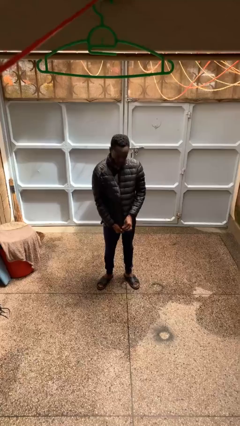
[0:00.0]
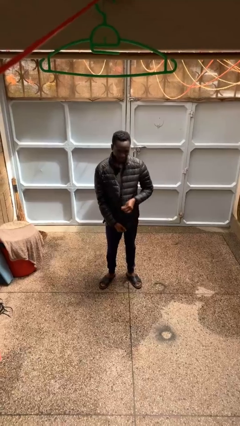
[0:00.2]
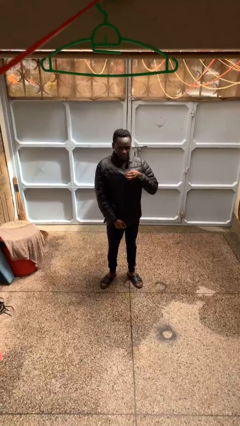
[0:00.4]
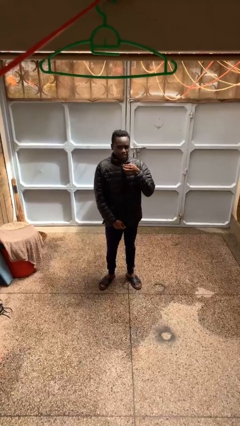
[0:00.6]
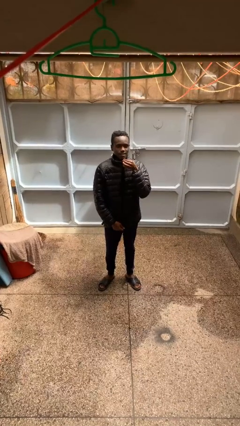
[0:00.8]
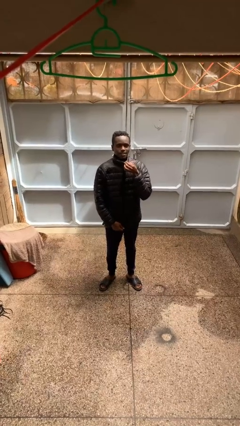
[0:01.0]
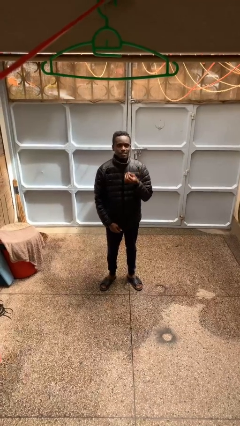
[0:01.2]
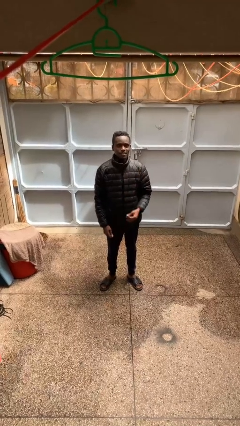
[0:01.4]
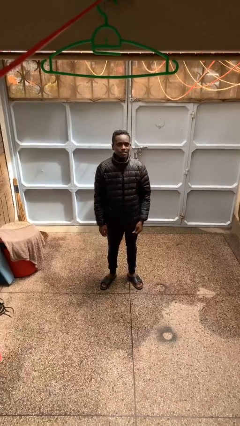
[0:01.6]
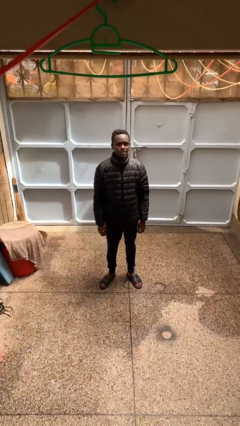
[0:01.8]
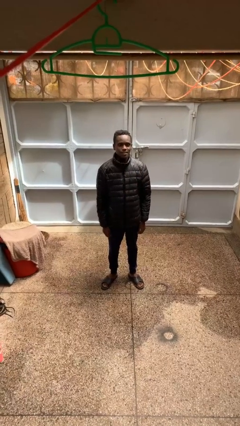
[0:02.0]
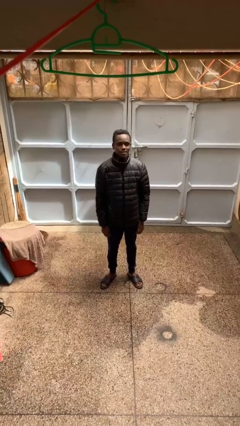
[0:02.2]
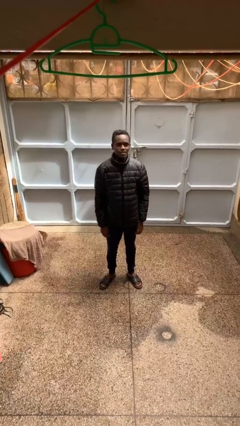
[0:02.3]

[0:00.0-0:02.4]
person zips up jacket

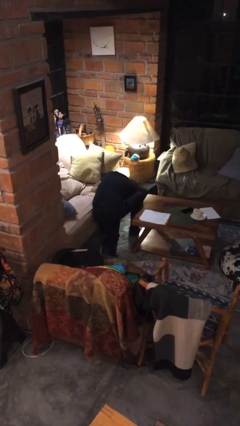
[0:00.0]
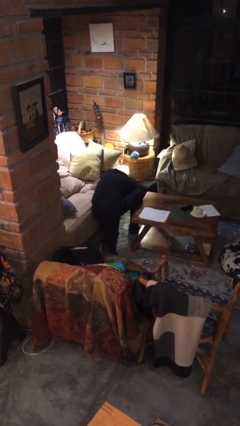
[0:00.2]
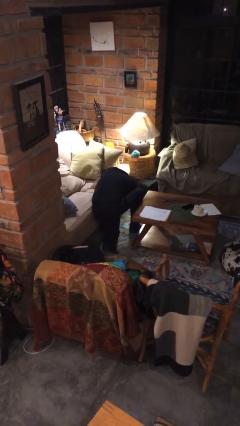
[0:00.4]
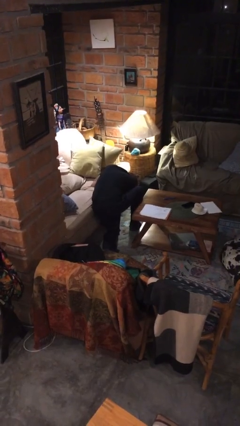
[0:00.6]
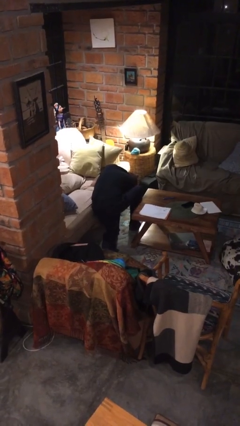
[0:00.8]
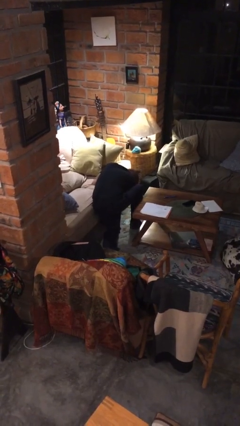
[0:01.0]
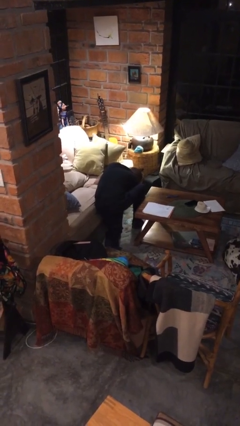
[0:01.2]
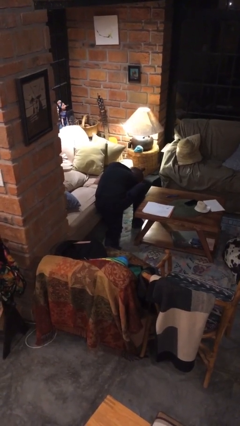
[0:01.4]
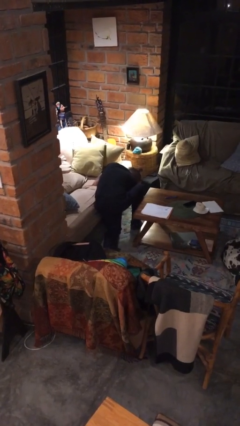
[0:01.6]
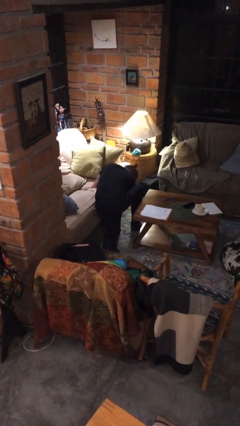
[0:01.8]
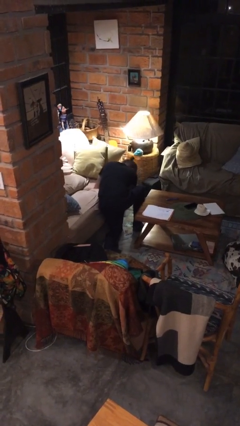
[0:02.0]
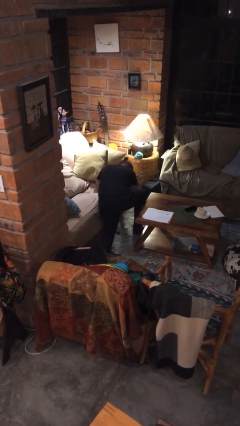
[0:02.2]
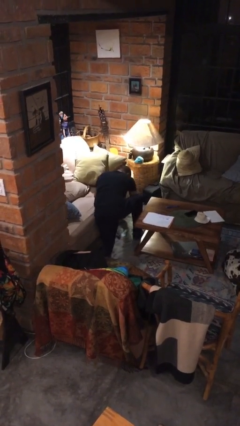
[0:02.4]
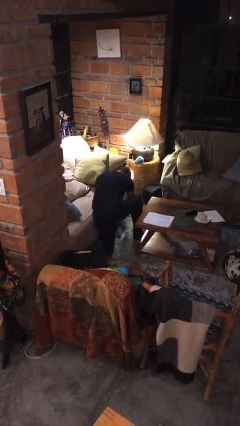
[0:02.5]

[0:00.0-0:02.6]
person searches under couch

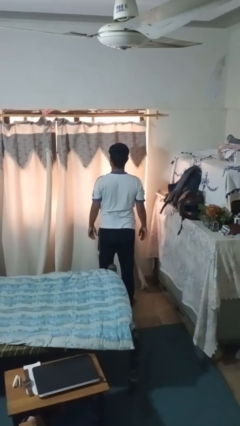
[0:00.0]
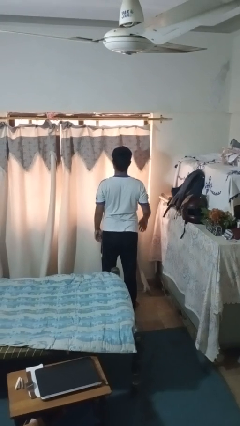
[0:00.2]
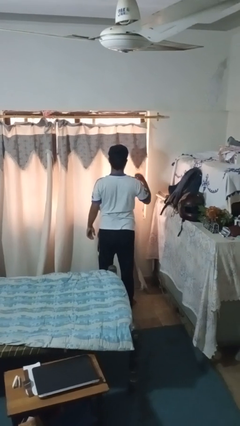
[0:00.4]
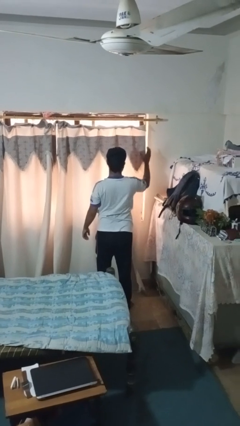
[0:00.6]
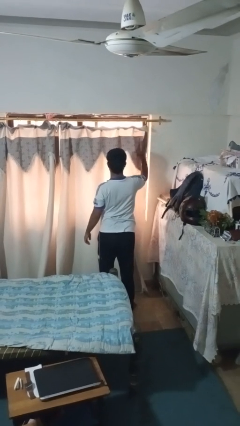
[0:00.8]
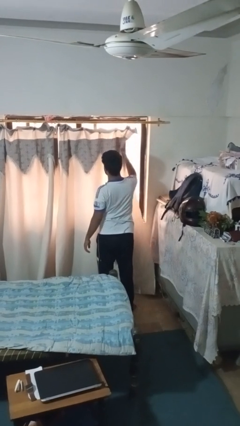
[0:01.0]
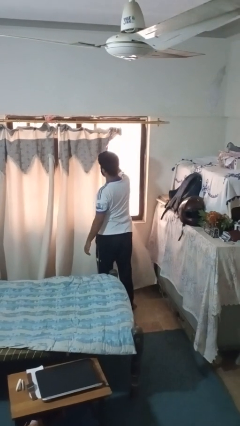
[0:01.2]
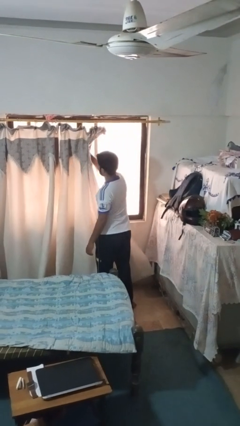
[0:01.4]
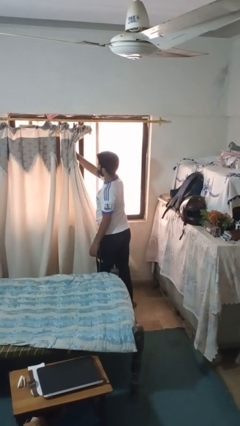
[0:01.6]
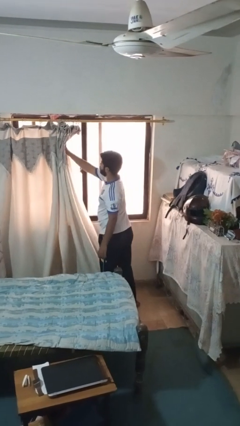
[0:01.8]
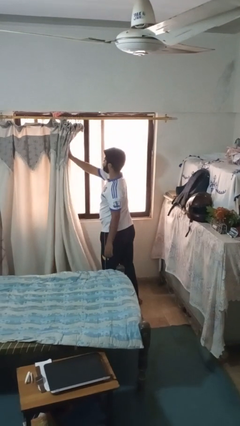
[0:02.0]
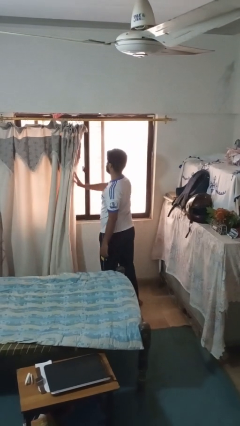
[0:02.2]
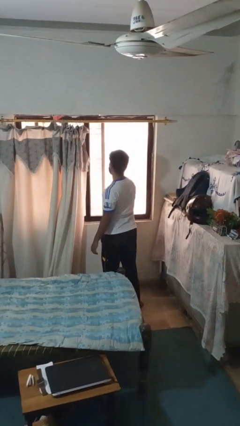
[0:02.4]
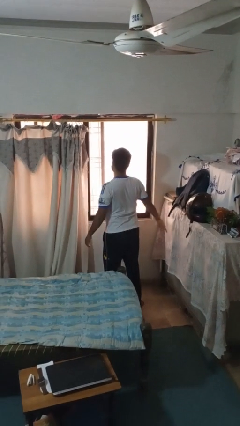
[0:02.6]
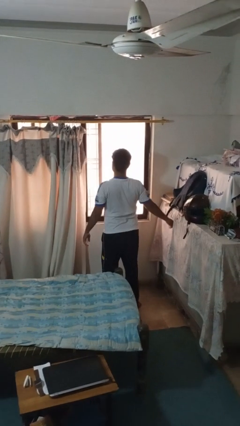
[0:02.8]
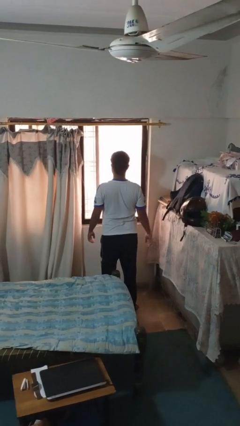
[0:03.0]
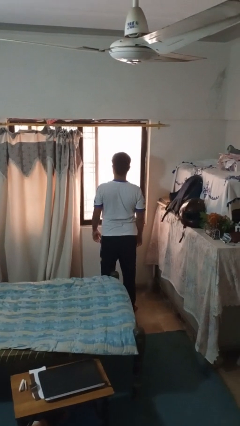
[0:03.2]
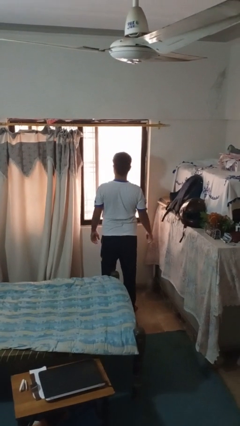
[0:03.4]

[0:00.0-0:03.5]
person opens curtains

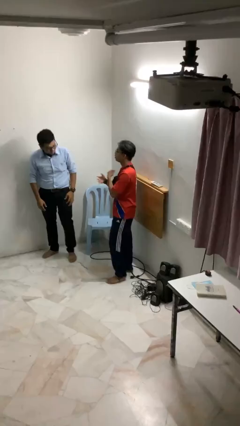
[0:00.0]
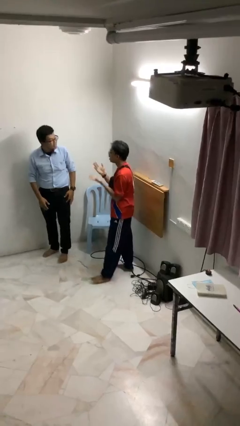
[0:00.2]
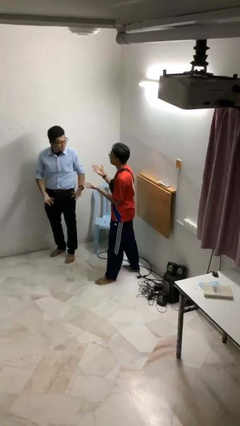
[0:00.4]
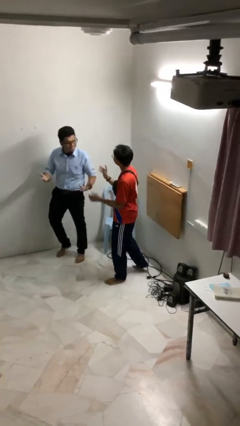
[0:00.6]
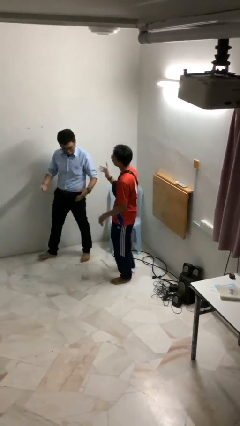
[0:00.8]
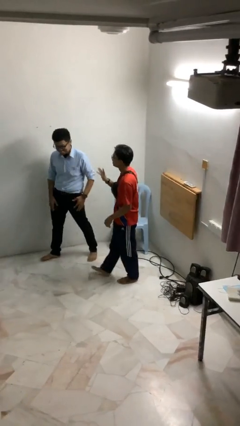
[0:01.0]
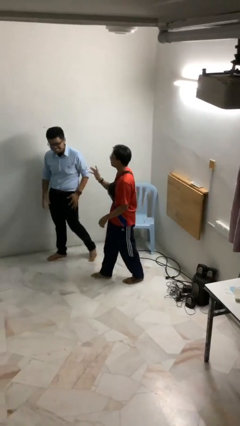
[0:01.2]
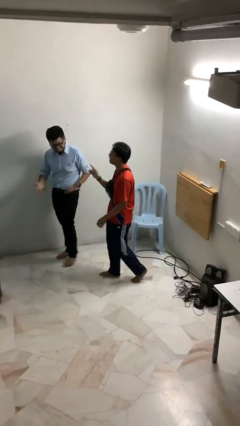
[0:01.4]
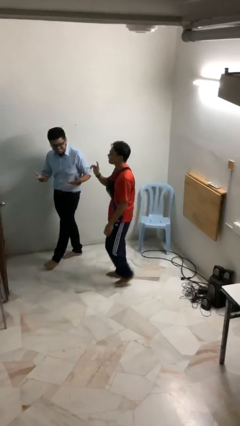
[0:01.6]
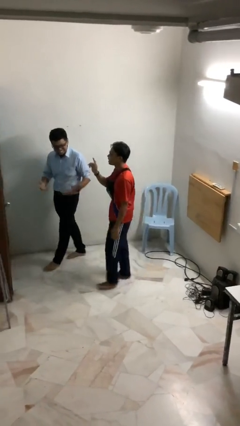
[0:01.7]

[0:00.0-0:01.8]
person talks to person

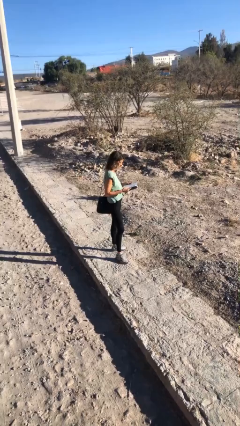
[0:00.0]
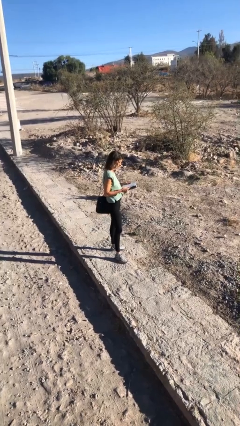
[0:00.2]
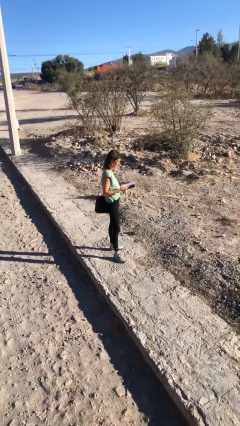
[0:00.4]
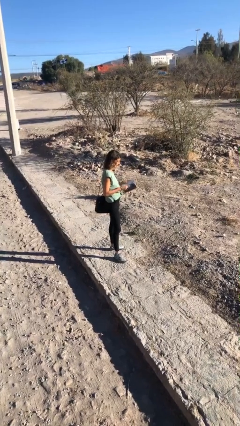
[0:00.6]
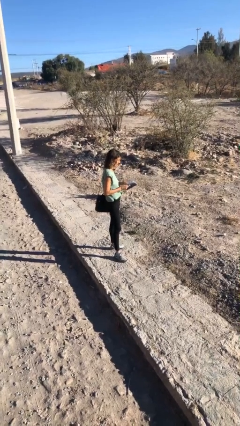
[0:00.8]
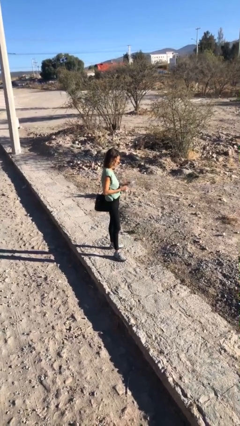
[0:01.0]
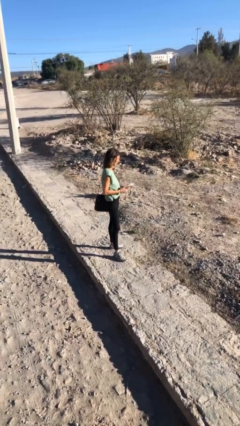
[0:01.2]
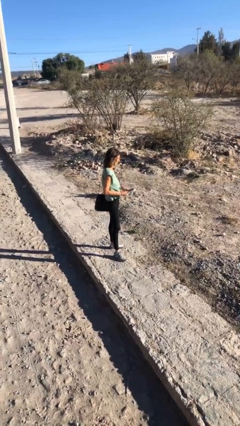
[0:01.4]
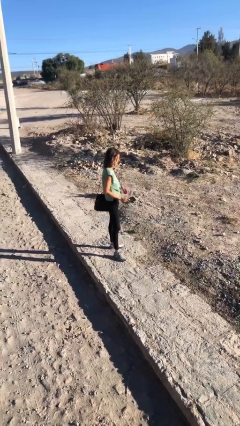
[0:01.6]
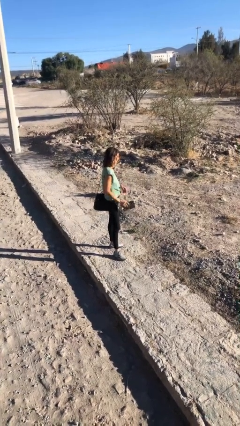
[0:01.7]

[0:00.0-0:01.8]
person reads document

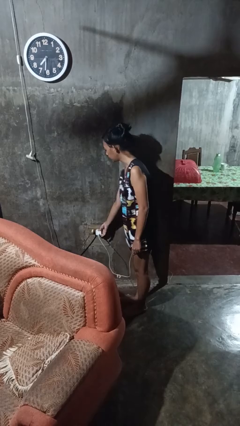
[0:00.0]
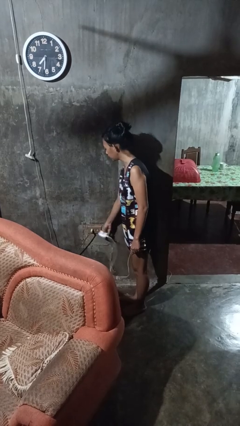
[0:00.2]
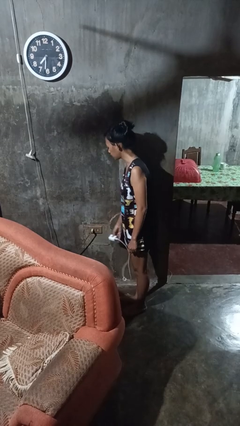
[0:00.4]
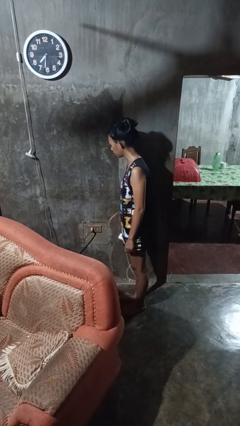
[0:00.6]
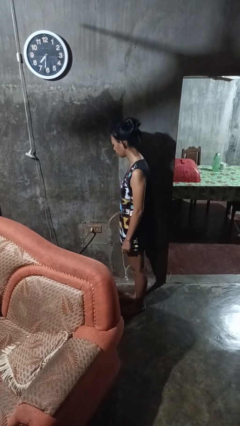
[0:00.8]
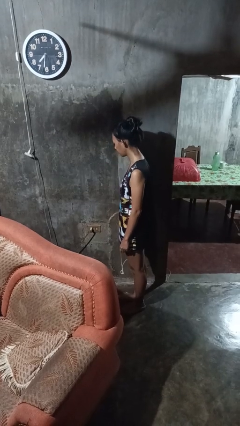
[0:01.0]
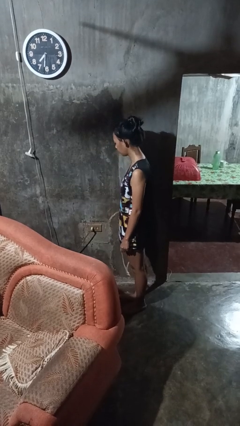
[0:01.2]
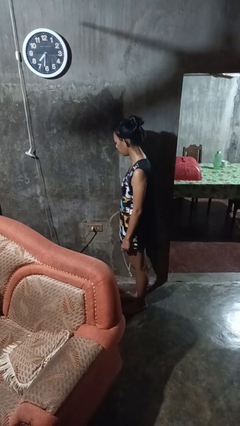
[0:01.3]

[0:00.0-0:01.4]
person unplugs from electrical socket

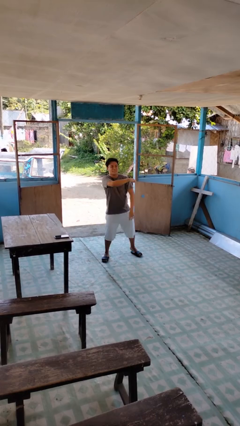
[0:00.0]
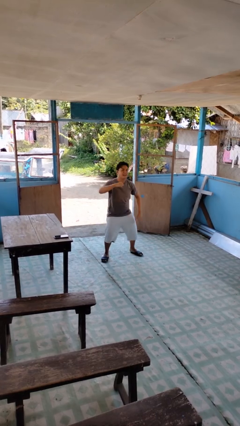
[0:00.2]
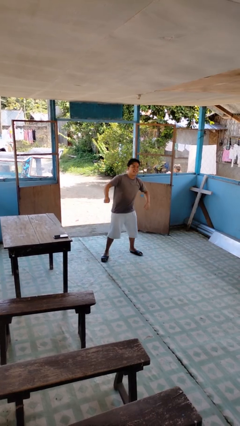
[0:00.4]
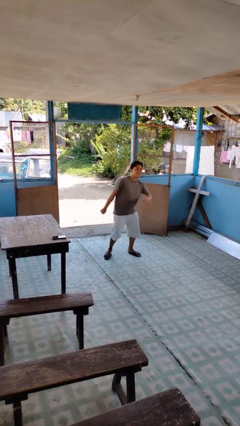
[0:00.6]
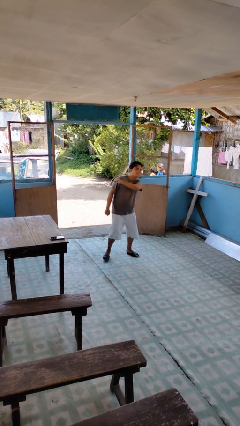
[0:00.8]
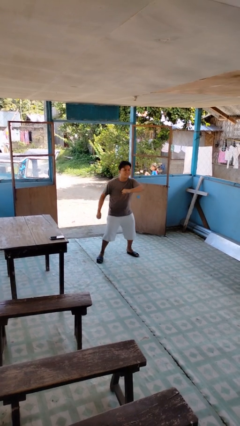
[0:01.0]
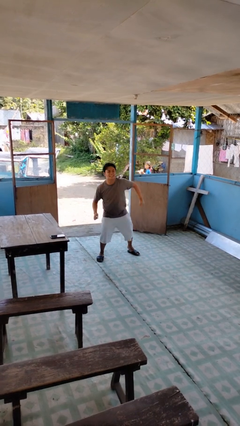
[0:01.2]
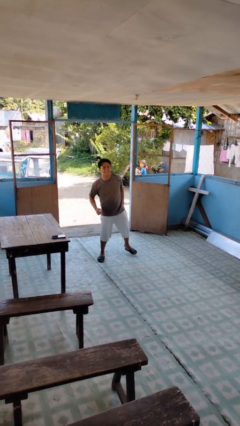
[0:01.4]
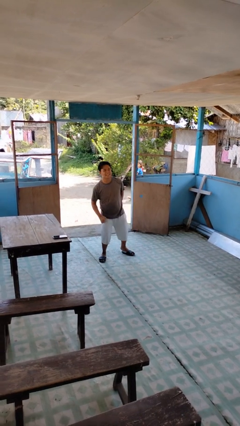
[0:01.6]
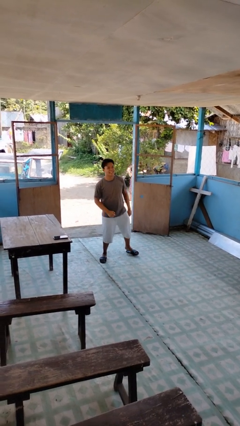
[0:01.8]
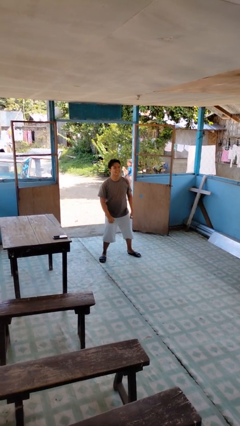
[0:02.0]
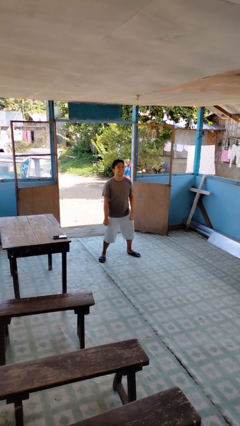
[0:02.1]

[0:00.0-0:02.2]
person dances in place

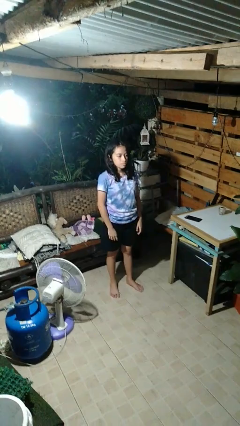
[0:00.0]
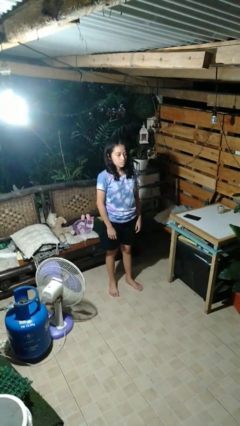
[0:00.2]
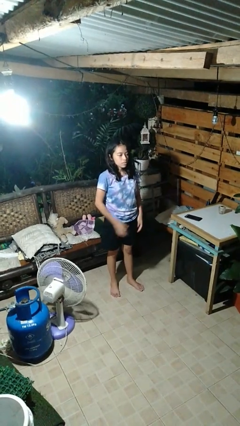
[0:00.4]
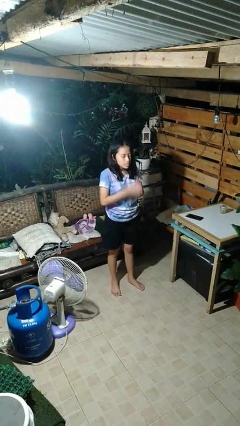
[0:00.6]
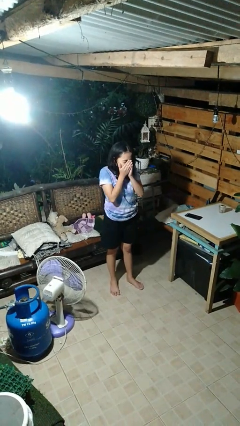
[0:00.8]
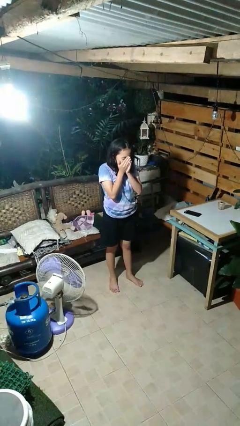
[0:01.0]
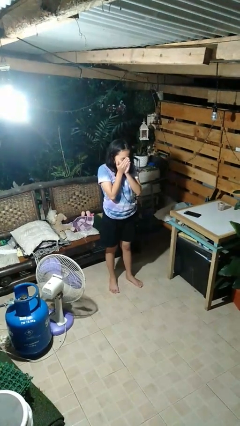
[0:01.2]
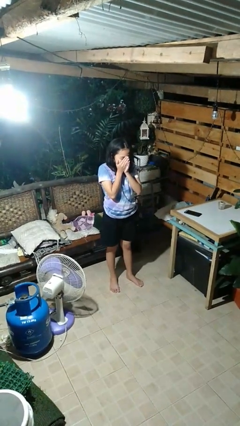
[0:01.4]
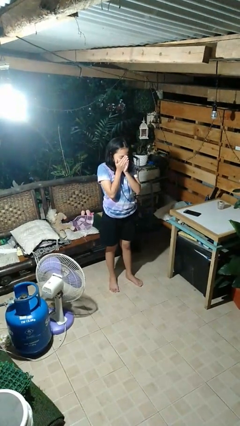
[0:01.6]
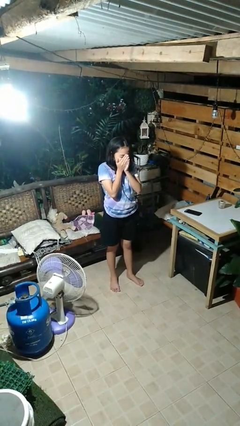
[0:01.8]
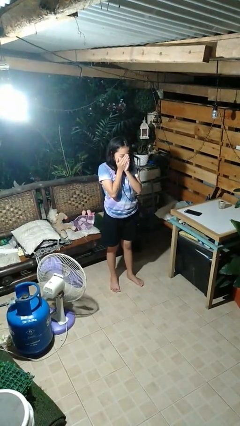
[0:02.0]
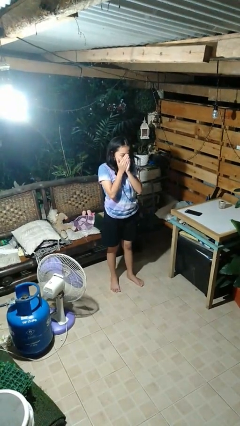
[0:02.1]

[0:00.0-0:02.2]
person sneezes into hand
